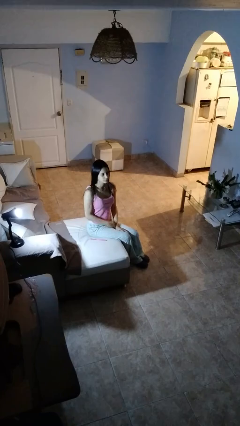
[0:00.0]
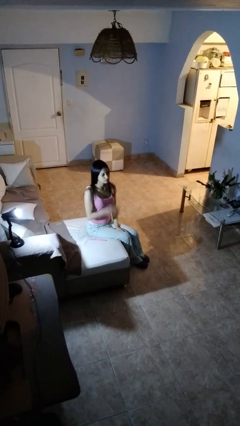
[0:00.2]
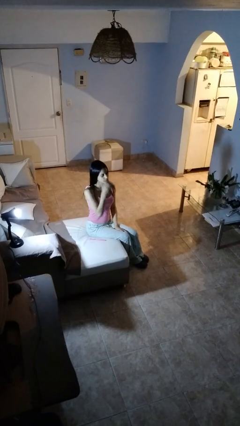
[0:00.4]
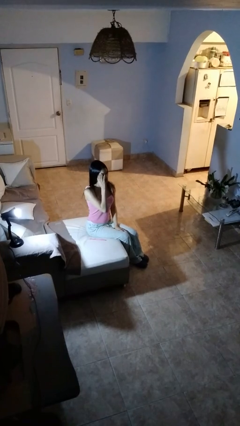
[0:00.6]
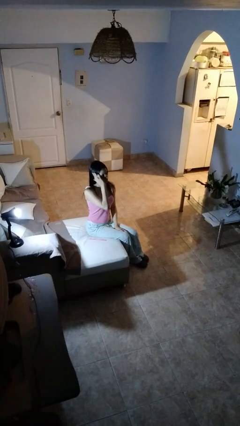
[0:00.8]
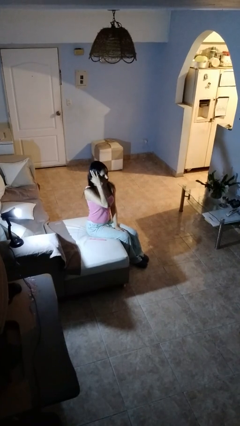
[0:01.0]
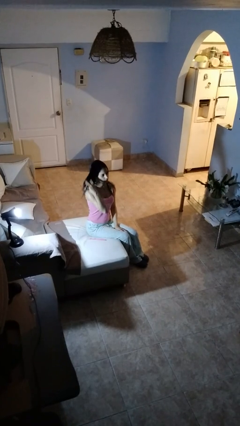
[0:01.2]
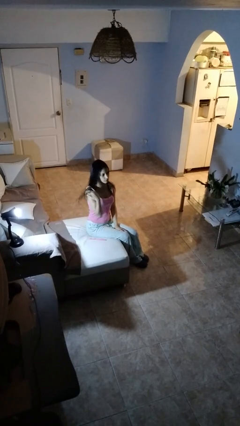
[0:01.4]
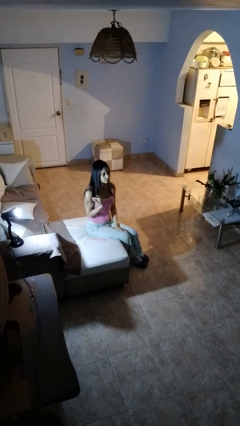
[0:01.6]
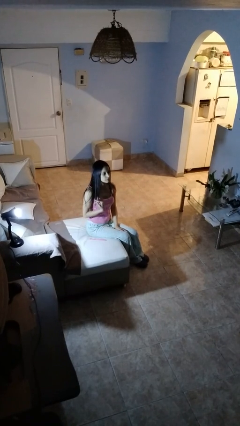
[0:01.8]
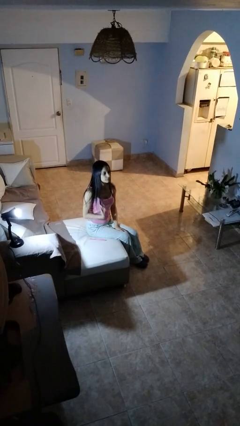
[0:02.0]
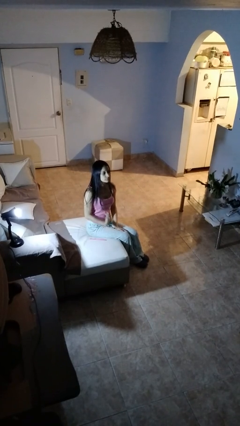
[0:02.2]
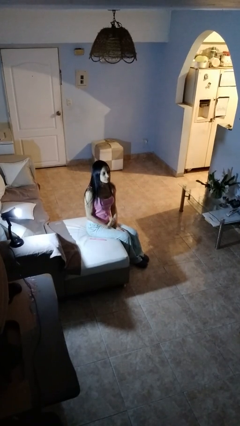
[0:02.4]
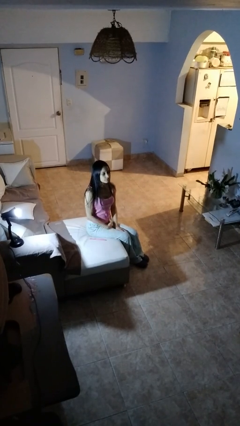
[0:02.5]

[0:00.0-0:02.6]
person strokes hair

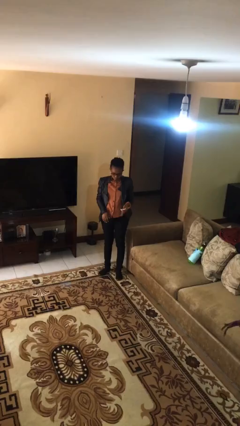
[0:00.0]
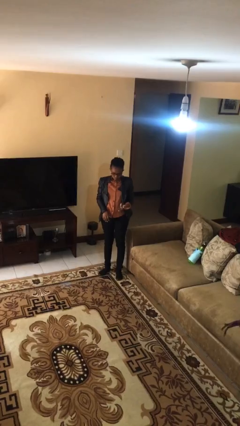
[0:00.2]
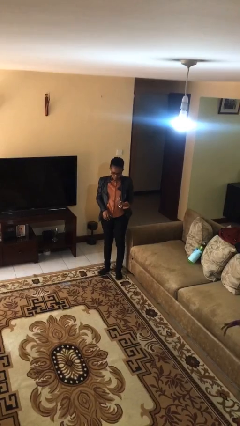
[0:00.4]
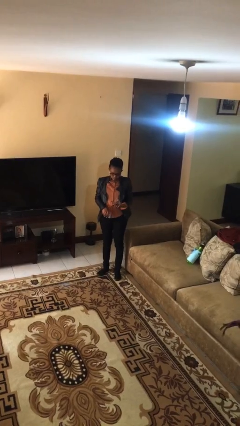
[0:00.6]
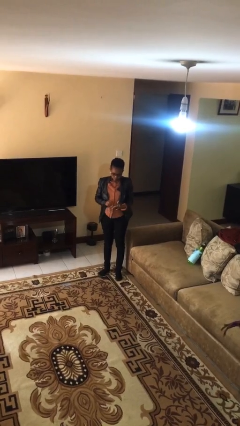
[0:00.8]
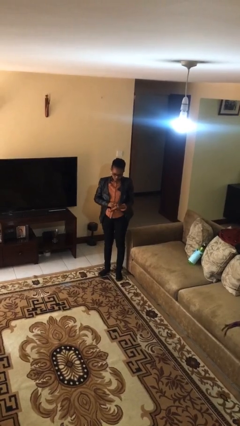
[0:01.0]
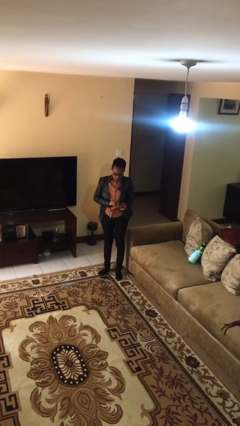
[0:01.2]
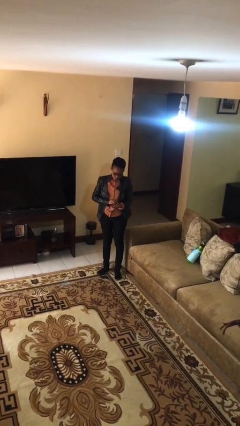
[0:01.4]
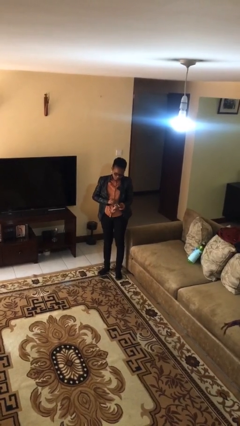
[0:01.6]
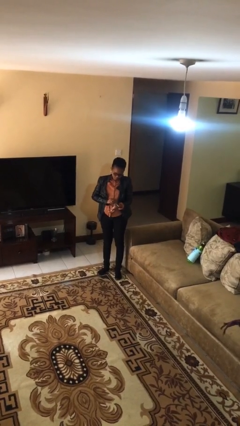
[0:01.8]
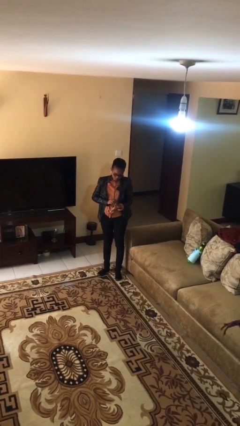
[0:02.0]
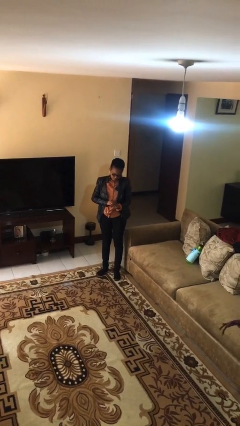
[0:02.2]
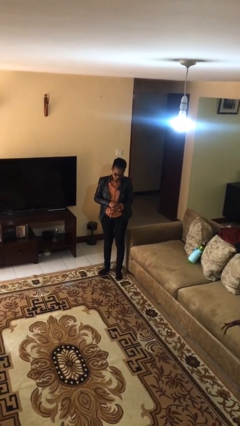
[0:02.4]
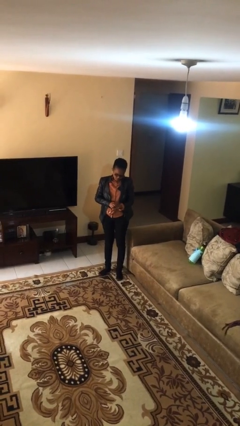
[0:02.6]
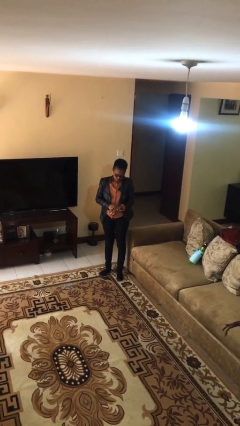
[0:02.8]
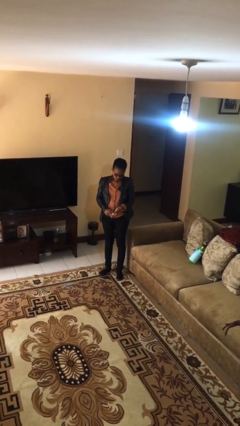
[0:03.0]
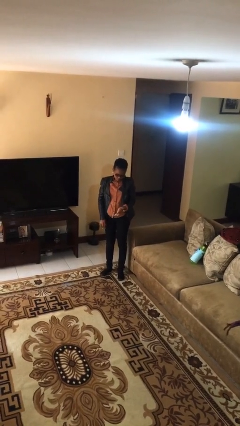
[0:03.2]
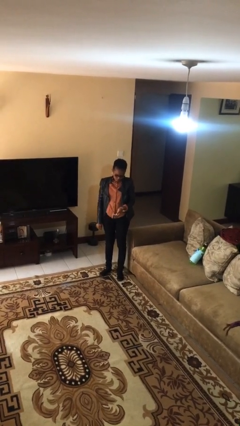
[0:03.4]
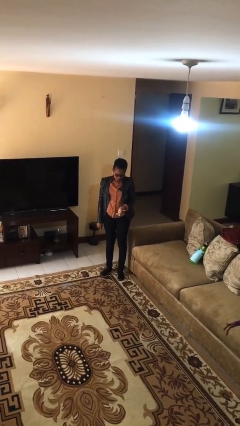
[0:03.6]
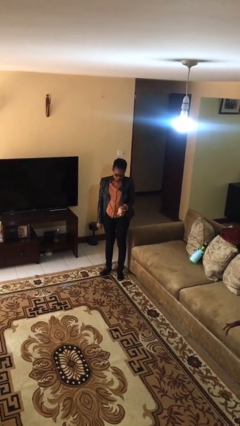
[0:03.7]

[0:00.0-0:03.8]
person puts on wristwatch

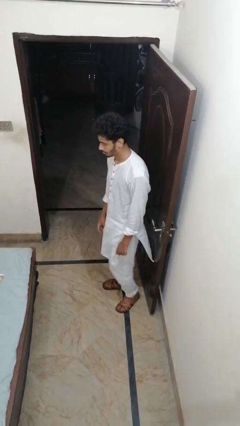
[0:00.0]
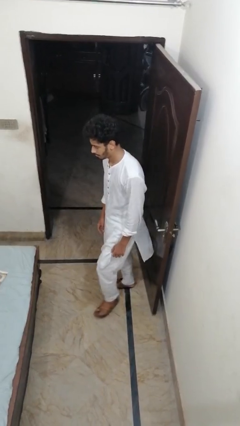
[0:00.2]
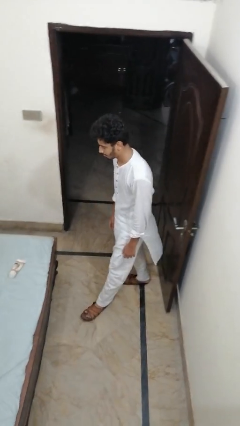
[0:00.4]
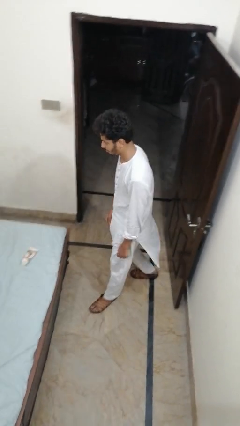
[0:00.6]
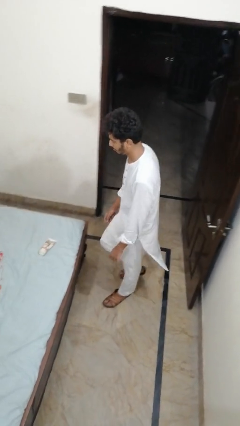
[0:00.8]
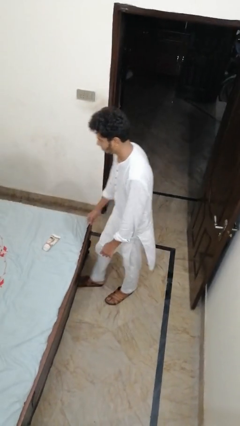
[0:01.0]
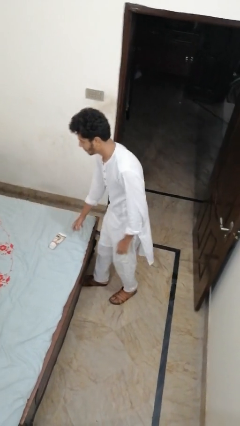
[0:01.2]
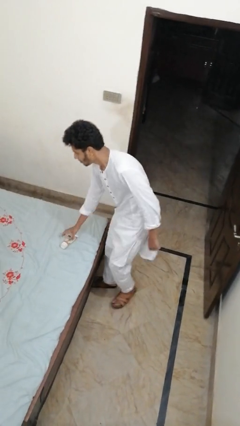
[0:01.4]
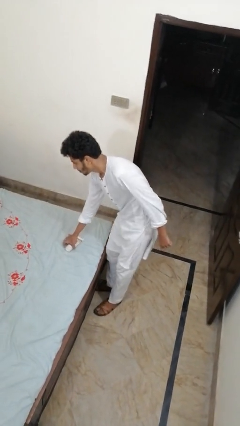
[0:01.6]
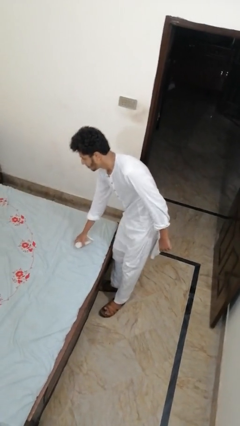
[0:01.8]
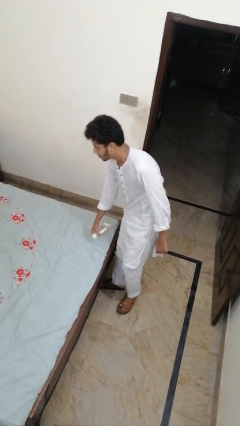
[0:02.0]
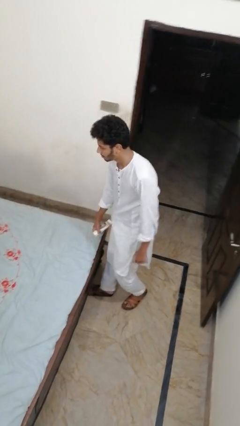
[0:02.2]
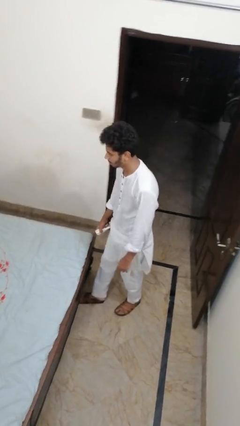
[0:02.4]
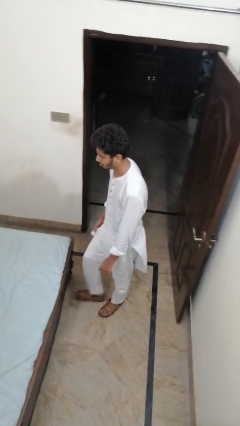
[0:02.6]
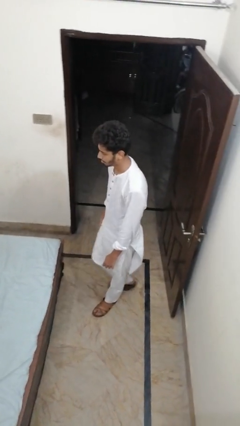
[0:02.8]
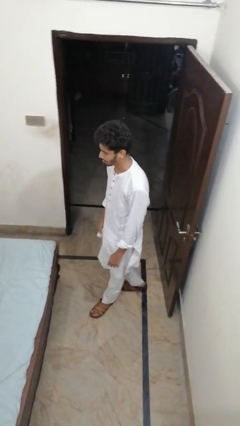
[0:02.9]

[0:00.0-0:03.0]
person picks up object from bed

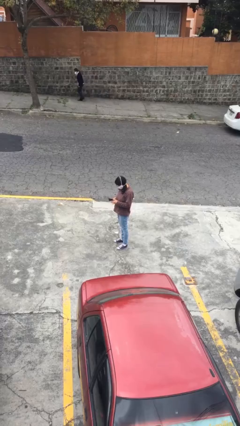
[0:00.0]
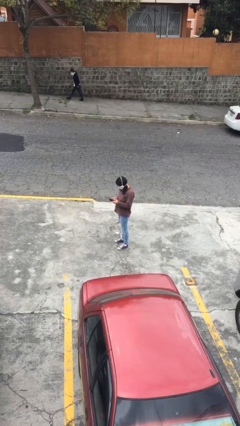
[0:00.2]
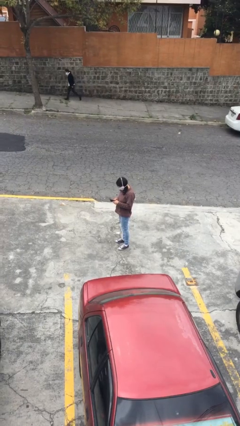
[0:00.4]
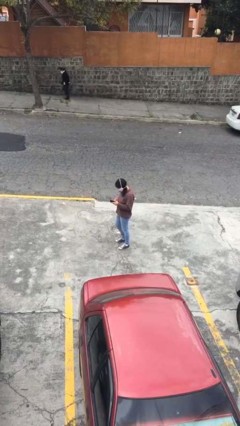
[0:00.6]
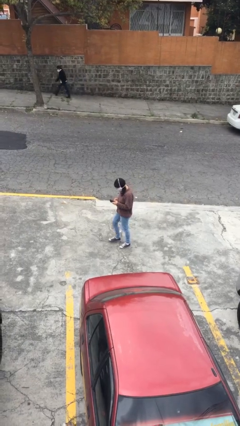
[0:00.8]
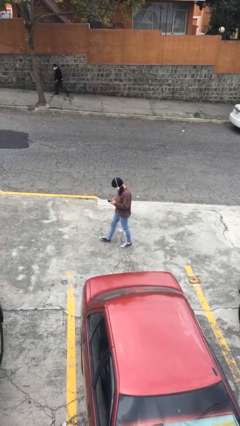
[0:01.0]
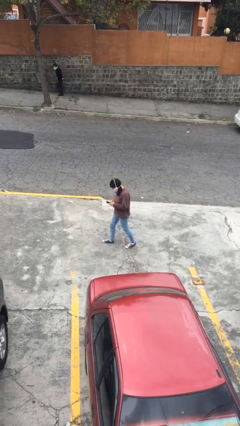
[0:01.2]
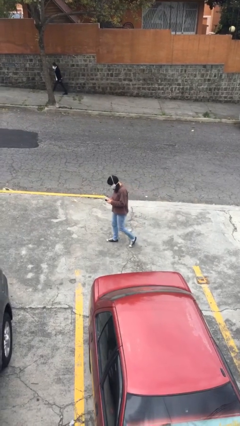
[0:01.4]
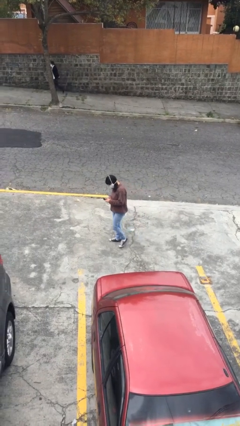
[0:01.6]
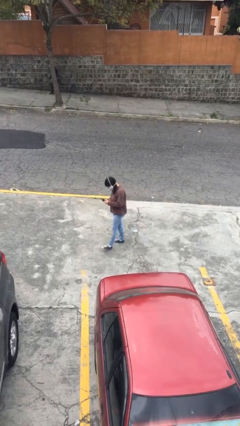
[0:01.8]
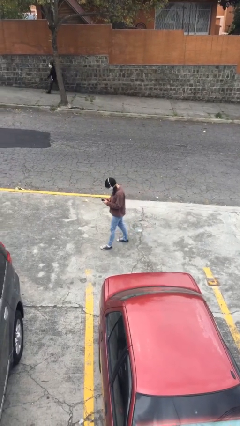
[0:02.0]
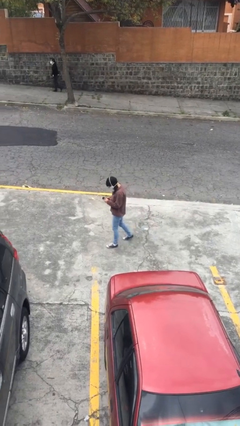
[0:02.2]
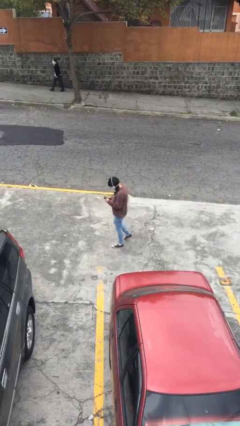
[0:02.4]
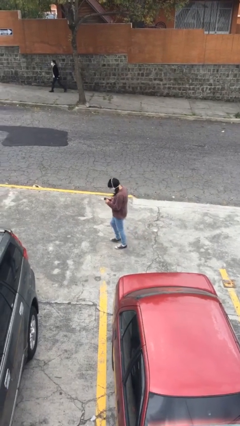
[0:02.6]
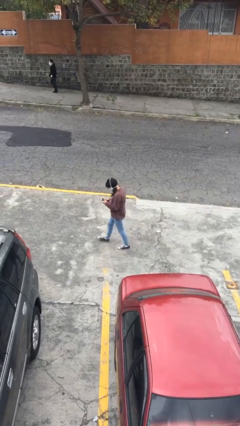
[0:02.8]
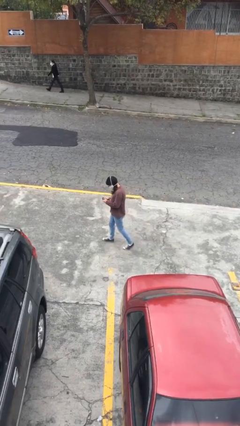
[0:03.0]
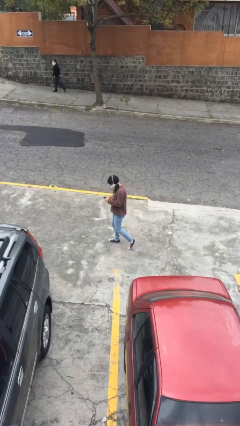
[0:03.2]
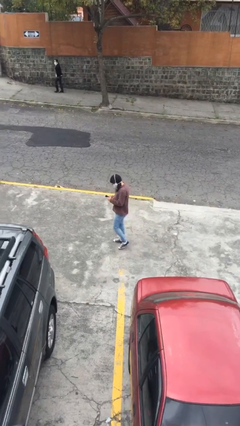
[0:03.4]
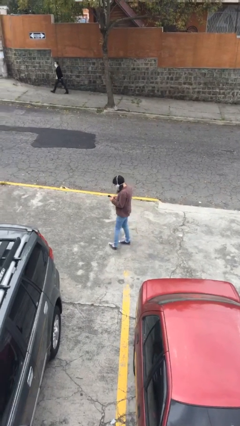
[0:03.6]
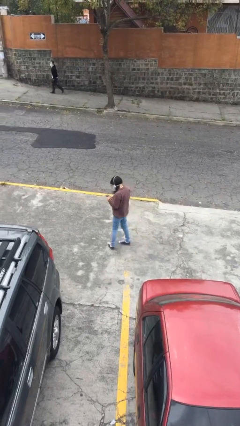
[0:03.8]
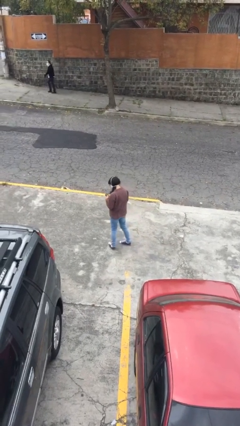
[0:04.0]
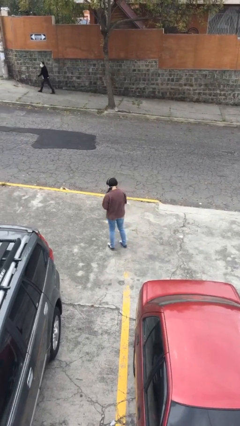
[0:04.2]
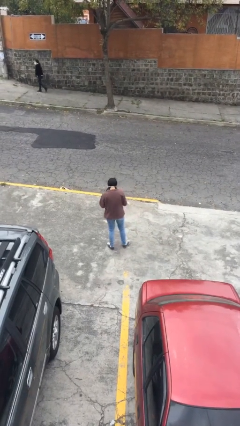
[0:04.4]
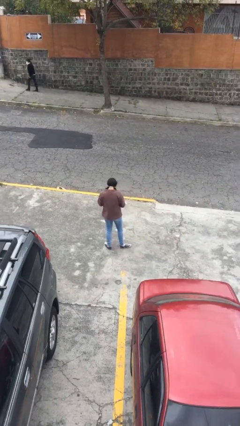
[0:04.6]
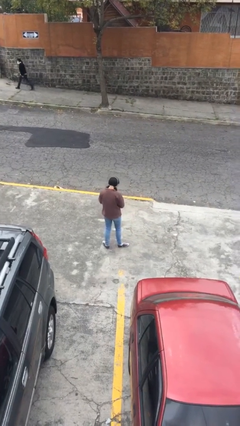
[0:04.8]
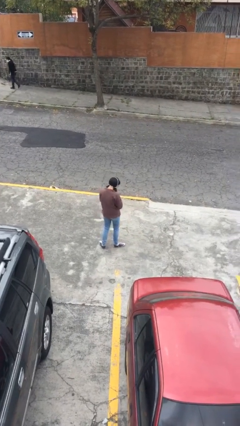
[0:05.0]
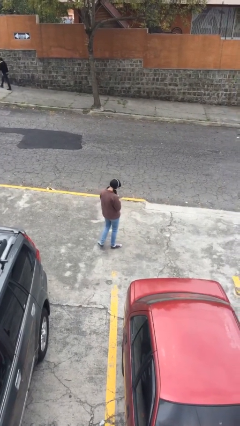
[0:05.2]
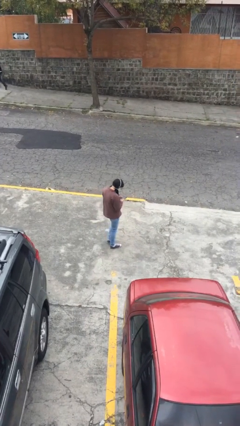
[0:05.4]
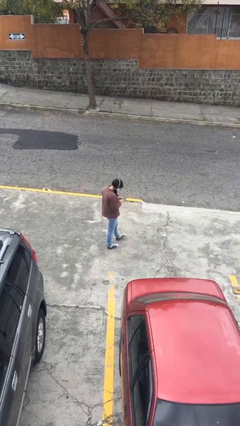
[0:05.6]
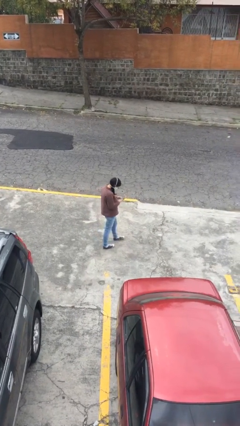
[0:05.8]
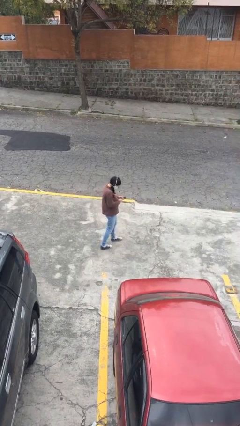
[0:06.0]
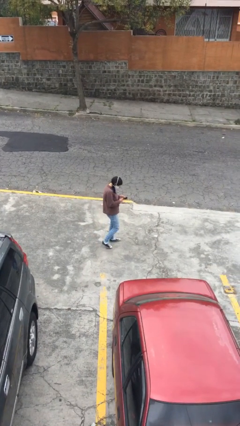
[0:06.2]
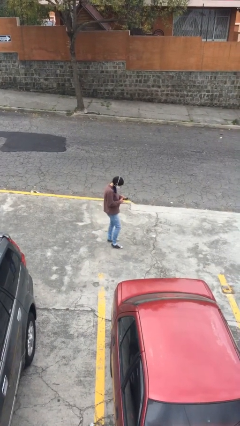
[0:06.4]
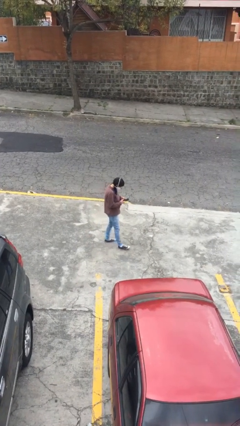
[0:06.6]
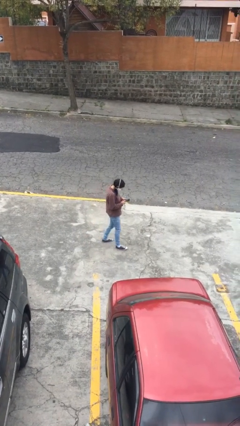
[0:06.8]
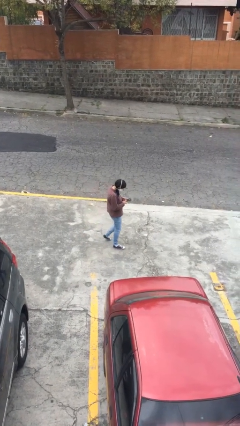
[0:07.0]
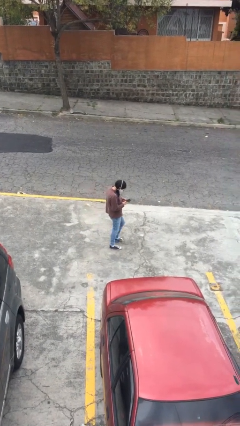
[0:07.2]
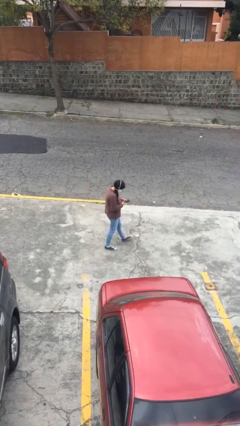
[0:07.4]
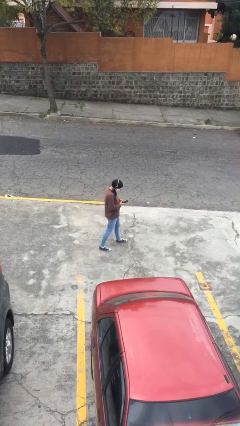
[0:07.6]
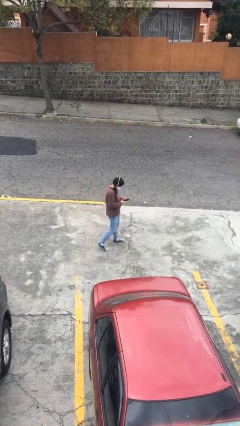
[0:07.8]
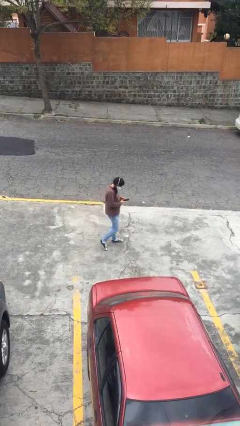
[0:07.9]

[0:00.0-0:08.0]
person texts on phone
